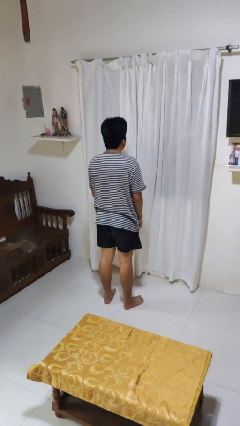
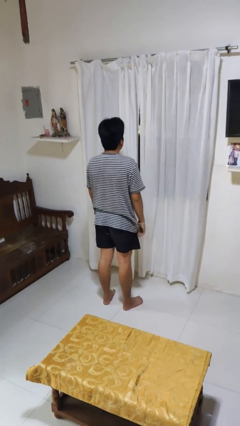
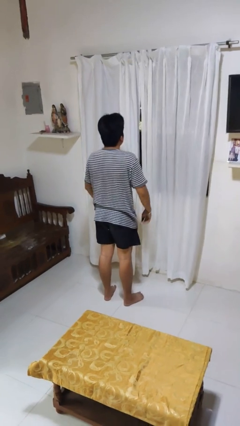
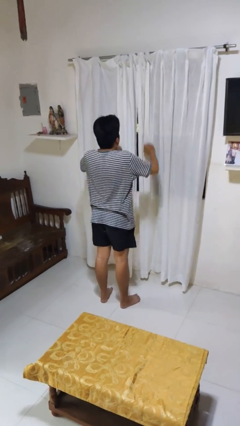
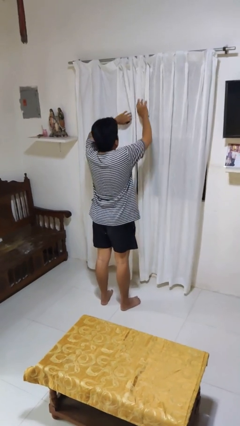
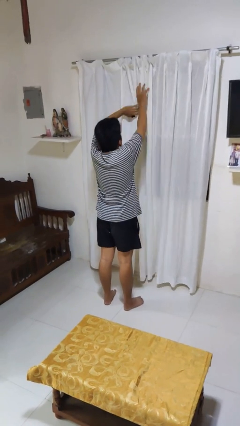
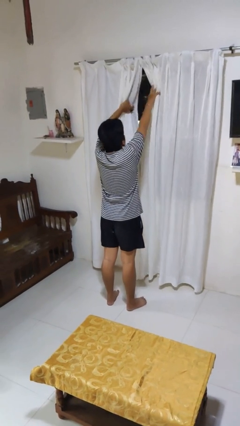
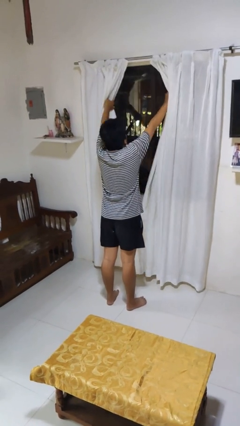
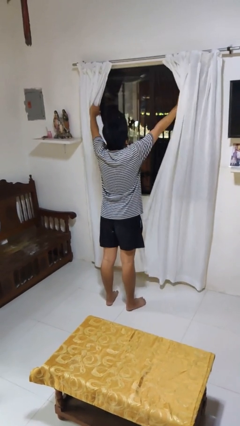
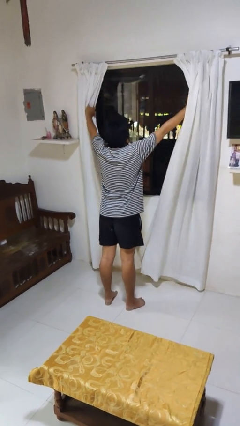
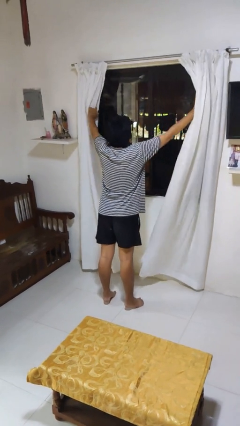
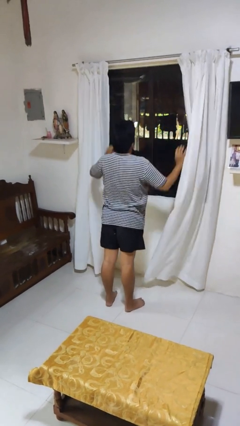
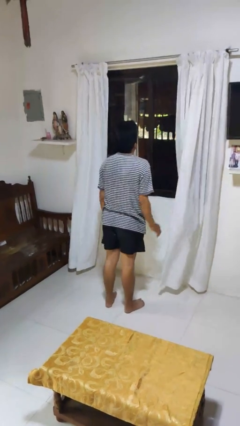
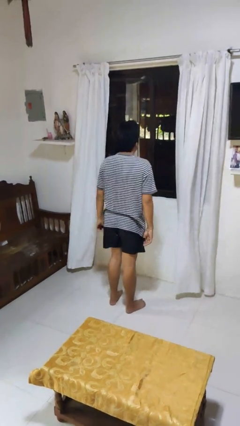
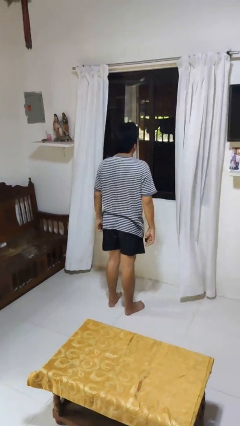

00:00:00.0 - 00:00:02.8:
person opens curtains

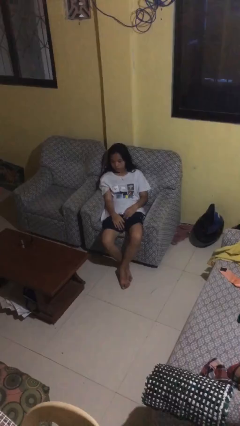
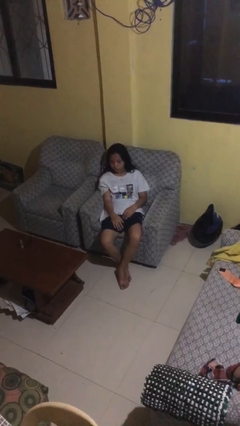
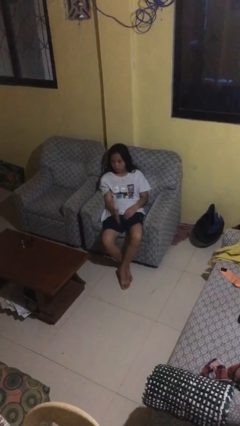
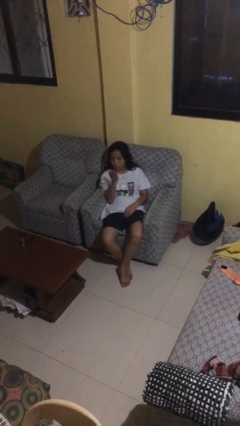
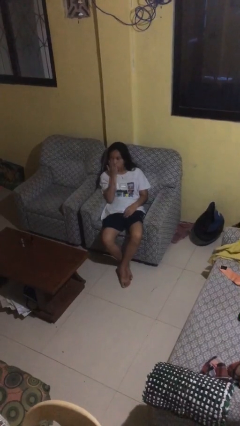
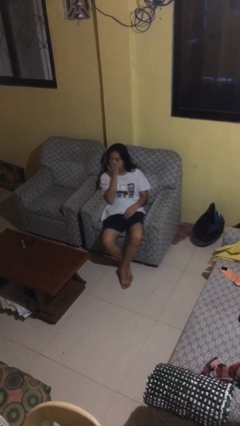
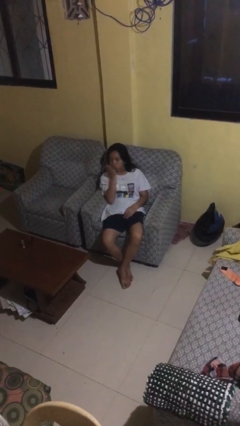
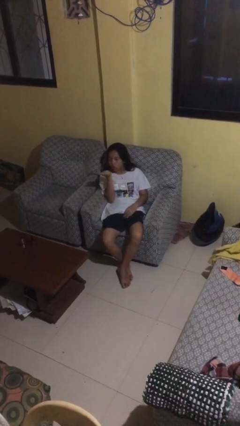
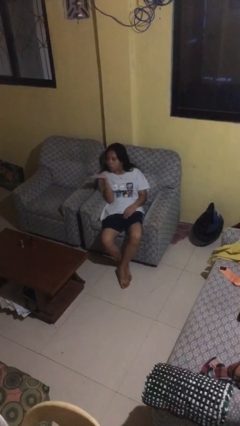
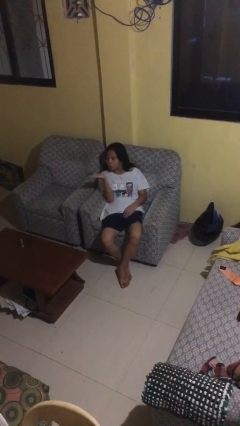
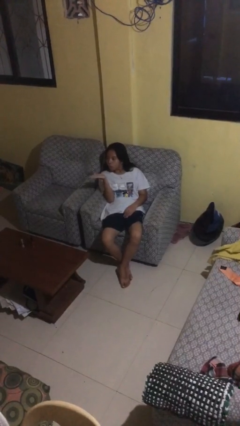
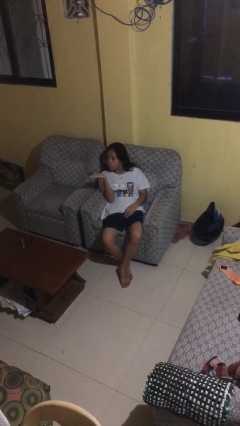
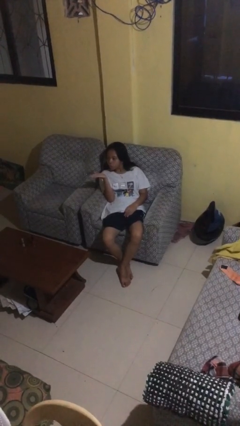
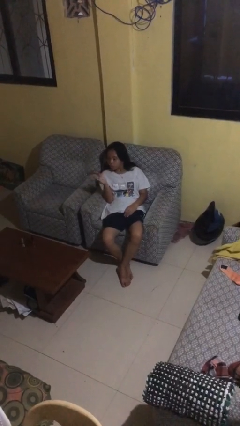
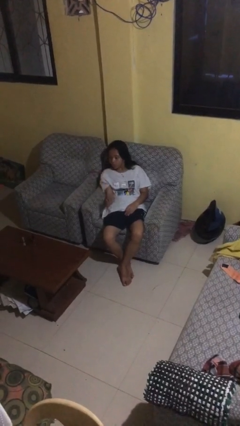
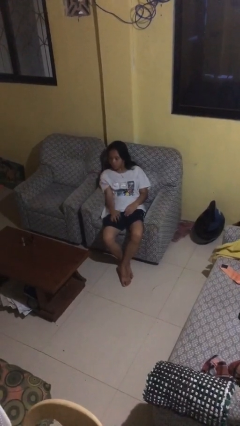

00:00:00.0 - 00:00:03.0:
person gestures blow kiss

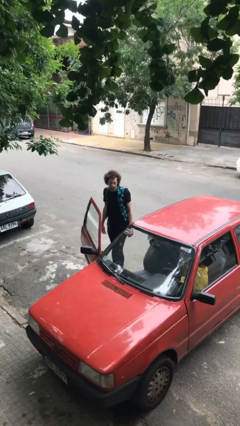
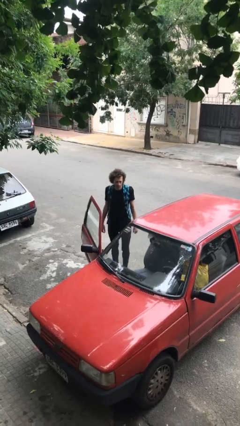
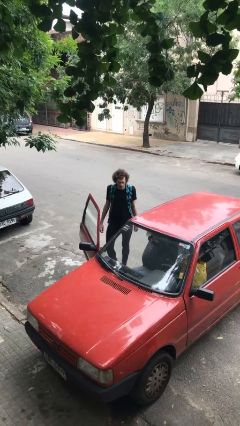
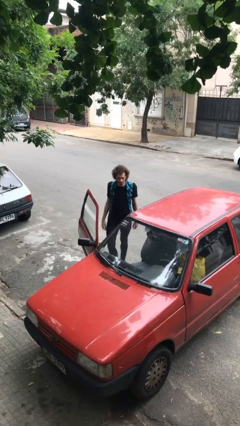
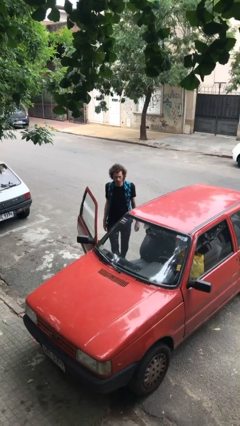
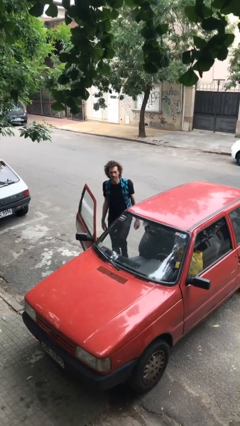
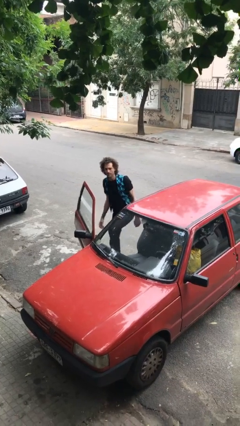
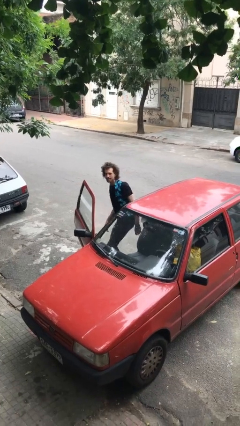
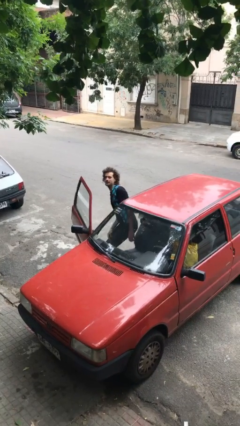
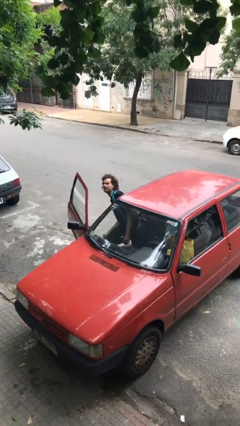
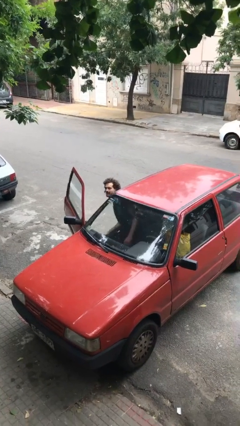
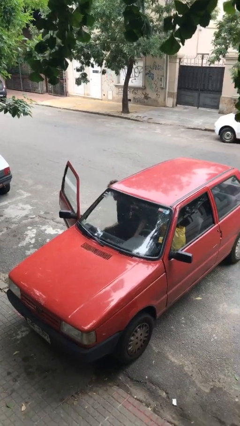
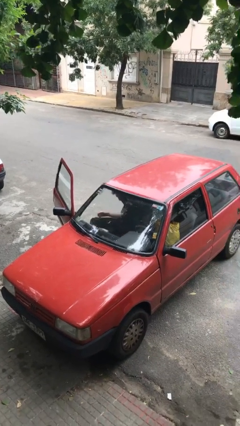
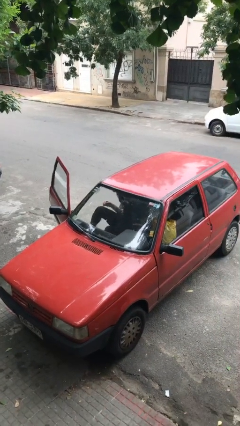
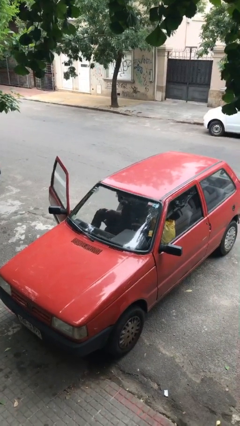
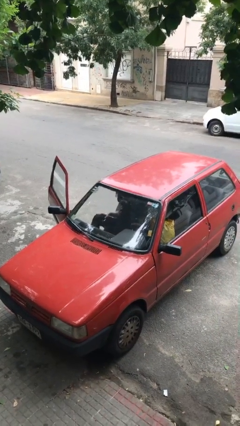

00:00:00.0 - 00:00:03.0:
person enters car

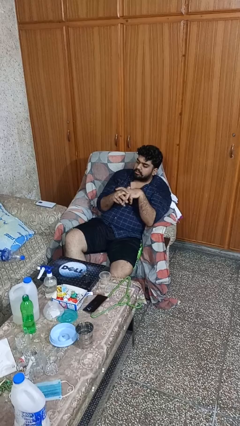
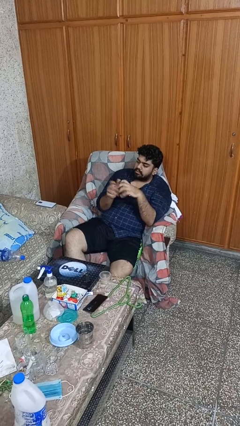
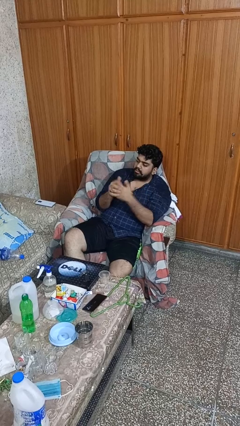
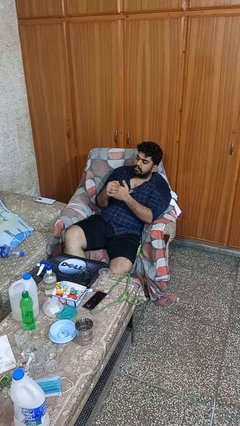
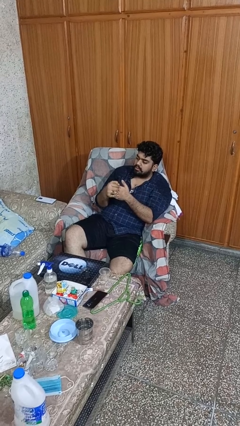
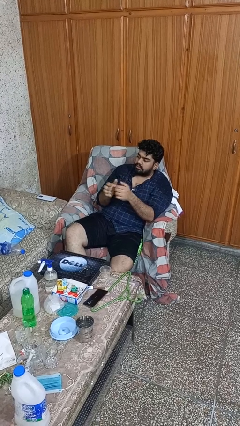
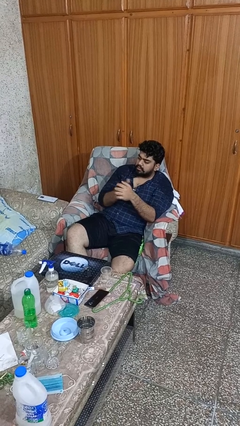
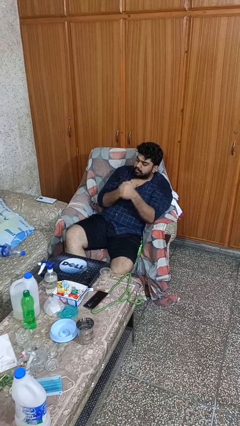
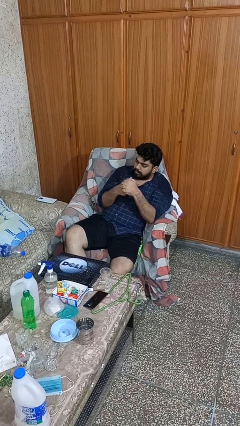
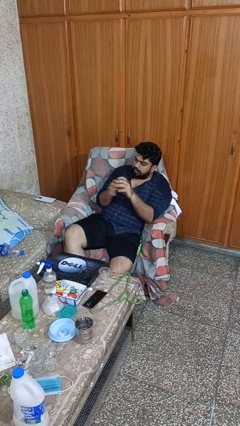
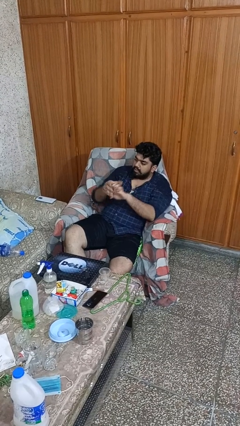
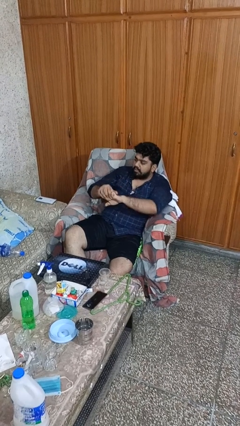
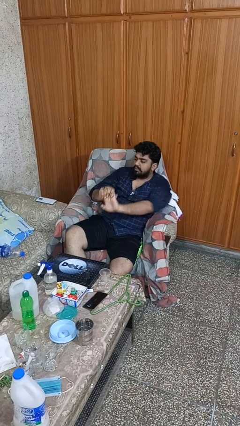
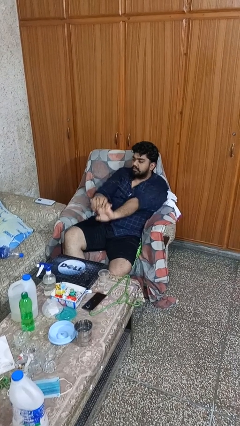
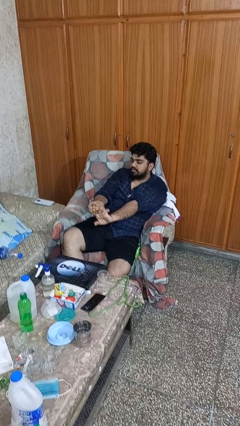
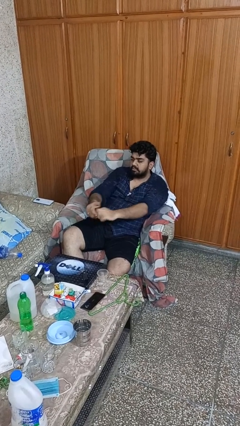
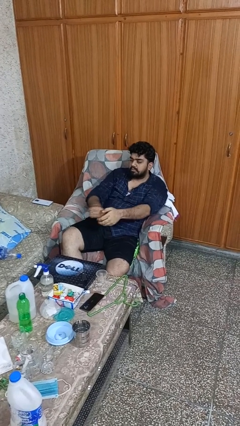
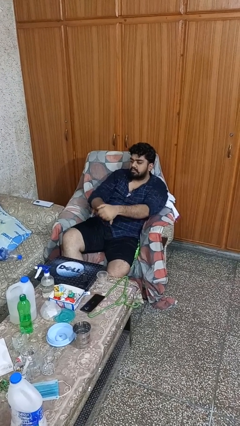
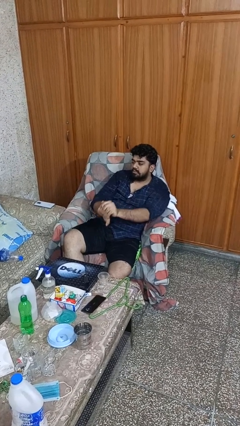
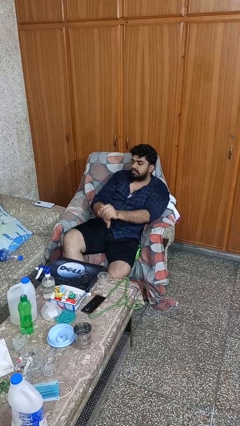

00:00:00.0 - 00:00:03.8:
person cracks knuckles

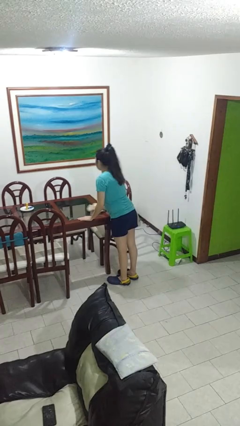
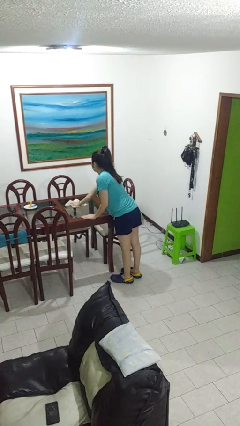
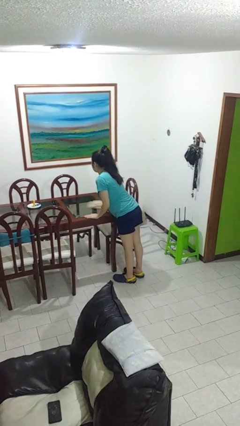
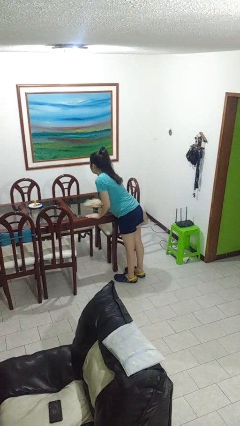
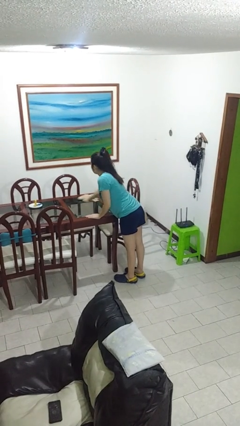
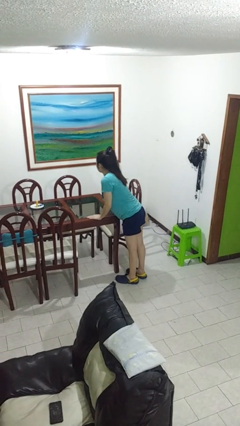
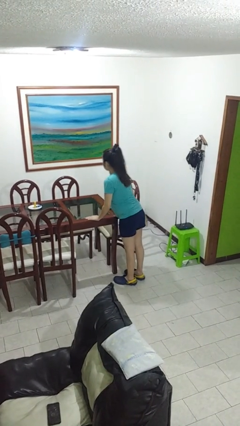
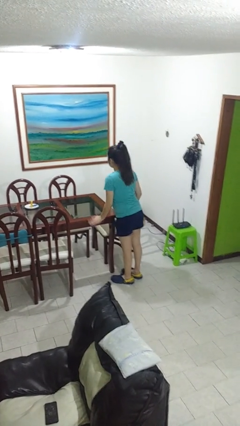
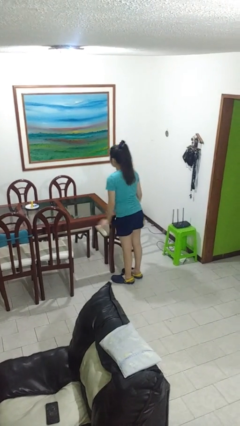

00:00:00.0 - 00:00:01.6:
person cleans table with rag

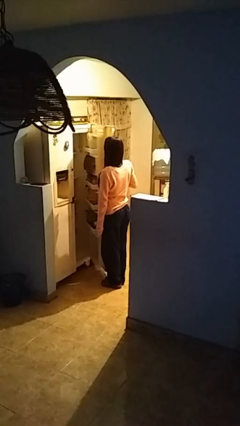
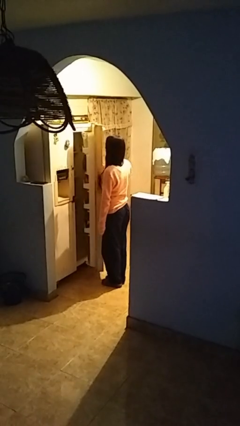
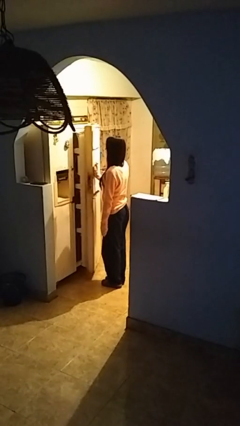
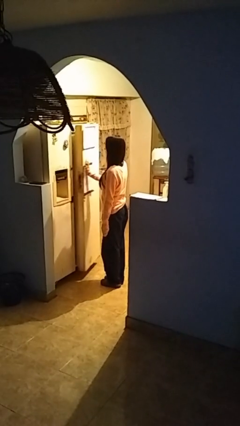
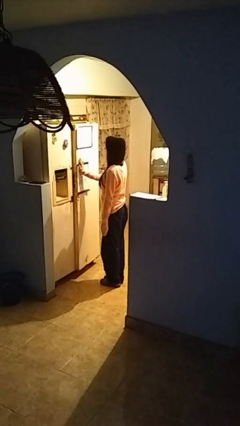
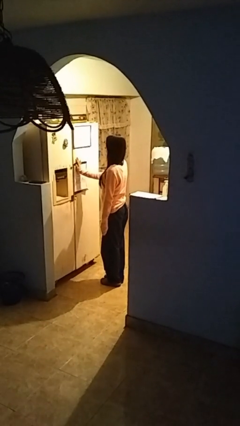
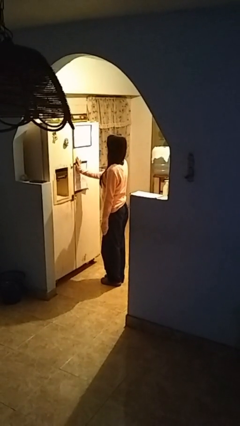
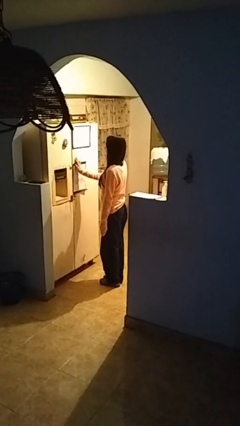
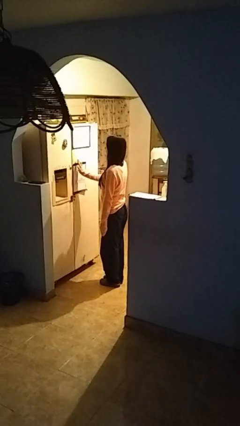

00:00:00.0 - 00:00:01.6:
person closes refrigerator

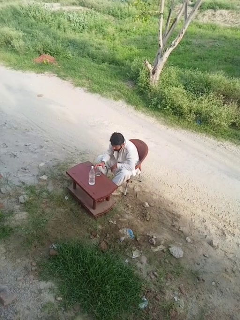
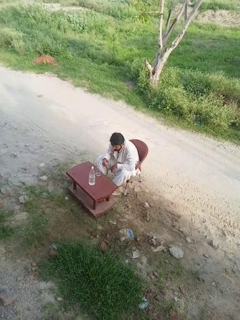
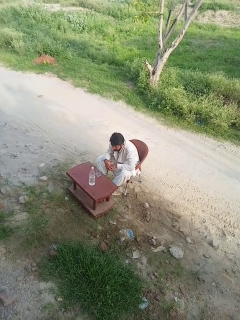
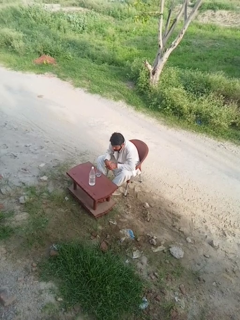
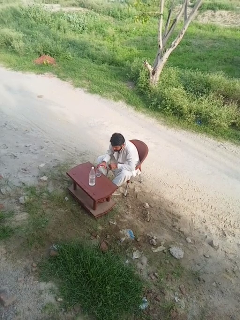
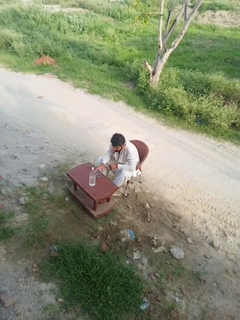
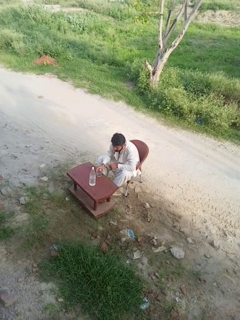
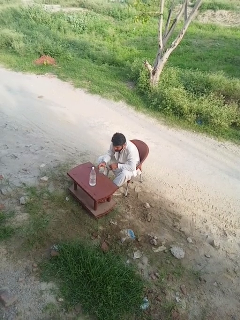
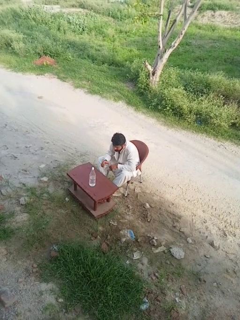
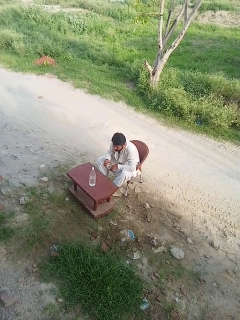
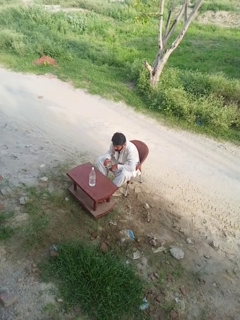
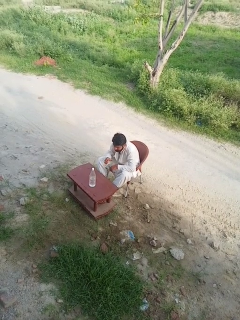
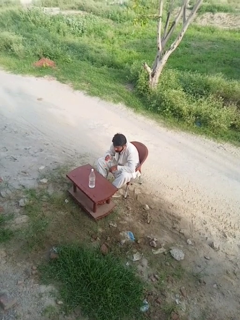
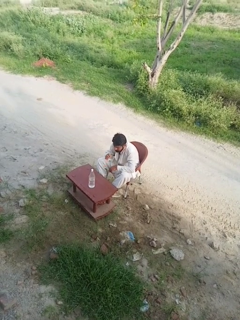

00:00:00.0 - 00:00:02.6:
person picks up object from table
